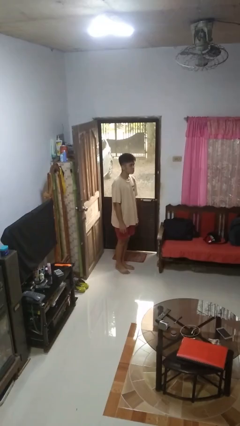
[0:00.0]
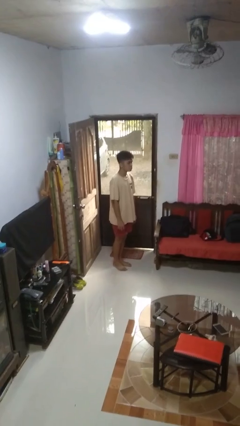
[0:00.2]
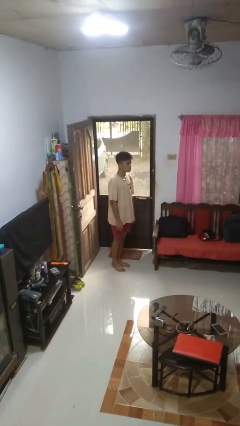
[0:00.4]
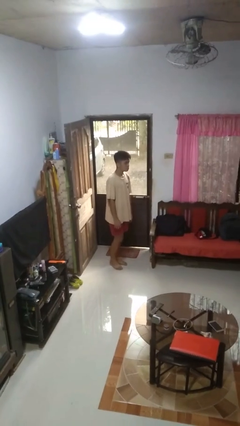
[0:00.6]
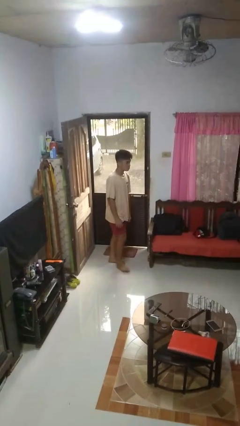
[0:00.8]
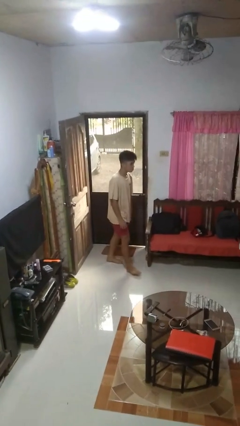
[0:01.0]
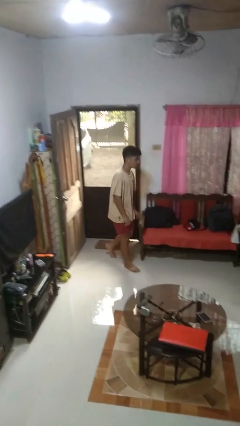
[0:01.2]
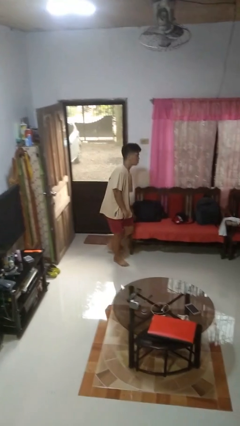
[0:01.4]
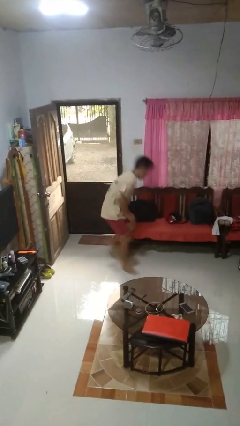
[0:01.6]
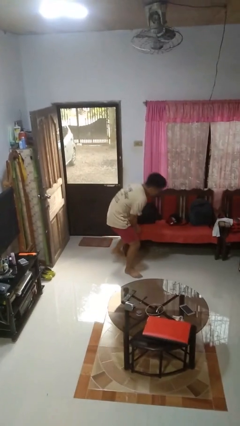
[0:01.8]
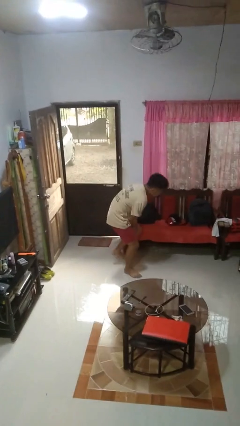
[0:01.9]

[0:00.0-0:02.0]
person trips on object on floor

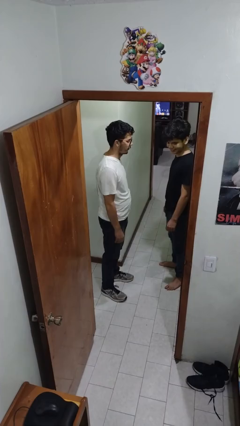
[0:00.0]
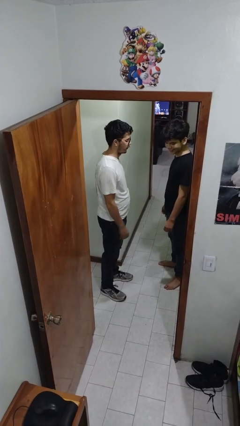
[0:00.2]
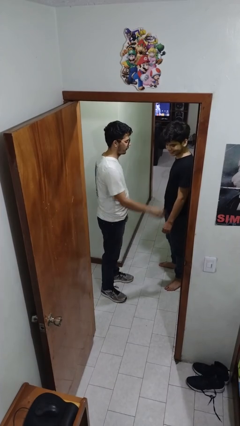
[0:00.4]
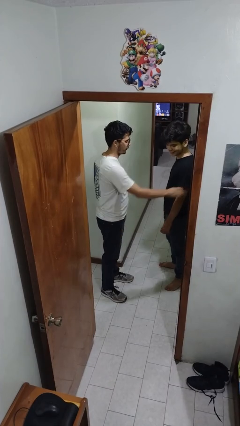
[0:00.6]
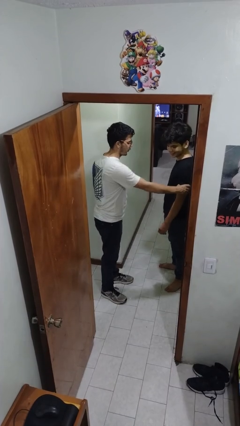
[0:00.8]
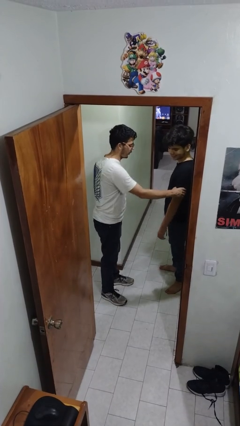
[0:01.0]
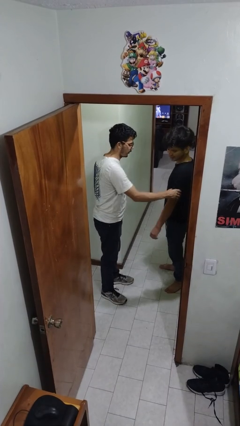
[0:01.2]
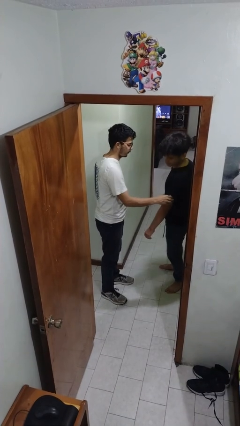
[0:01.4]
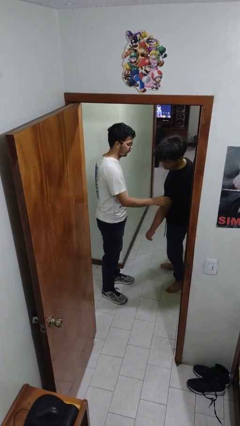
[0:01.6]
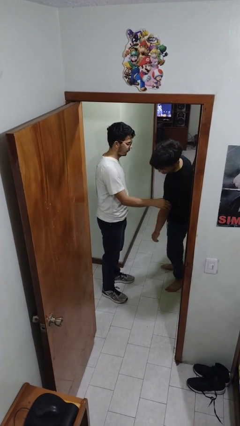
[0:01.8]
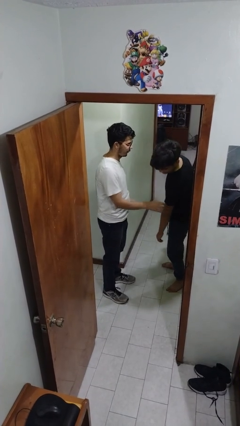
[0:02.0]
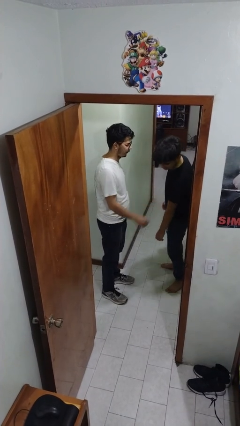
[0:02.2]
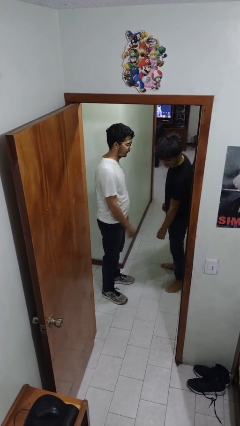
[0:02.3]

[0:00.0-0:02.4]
person grabs person by bicep

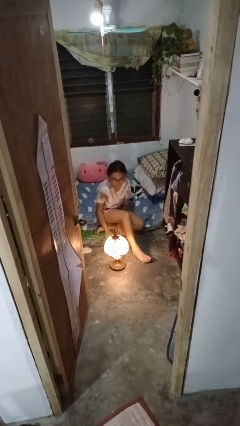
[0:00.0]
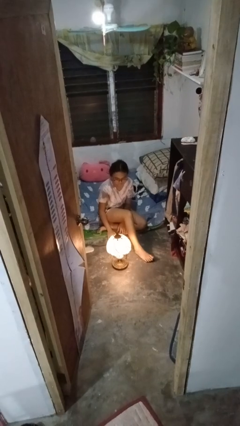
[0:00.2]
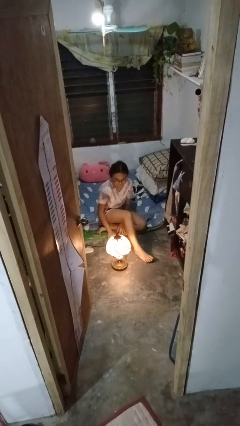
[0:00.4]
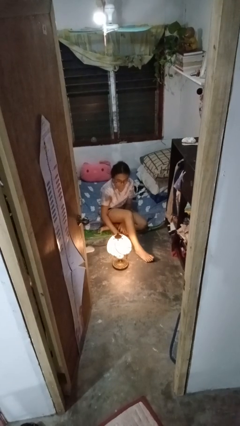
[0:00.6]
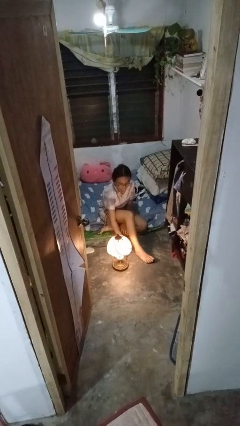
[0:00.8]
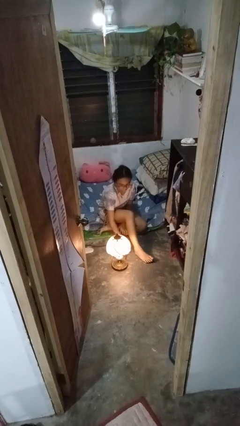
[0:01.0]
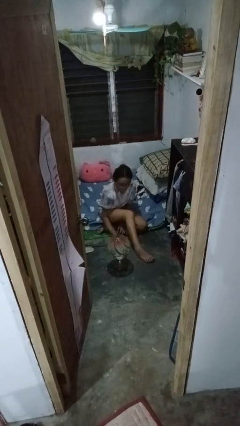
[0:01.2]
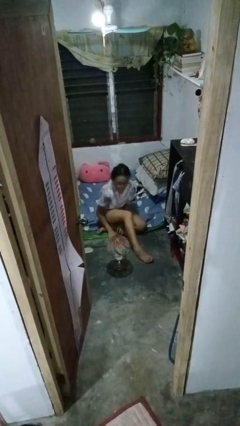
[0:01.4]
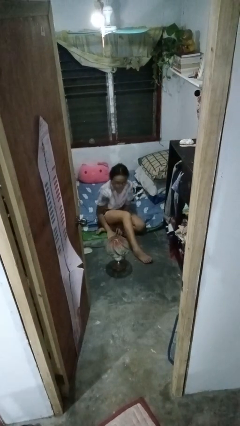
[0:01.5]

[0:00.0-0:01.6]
person turns off lamp

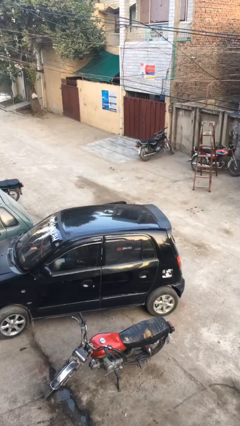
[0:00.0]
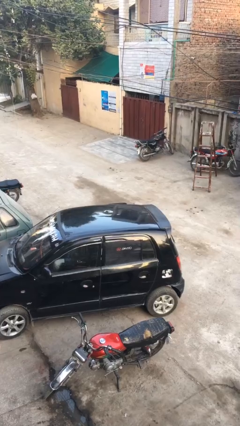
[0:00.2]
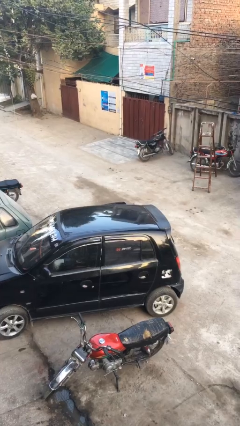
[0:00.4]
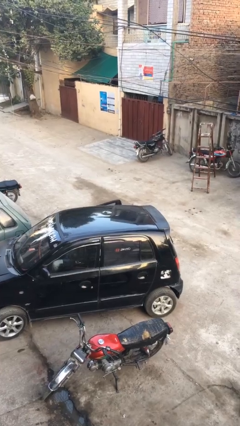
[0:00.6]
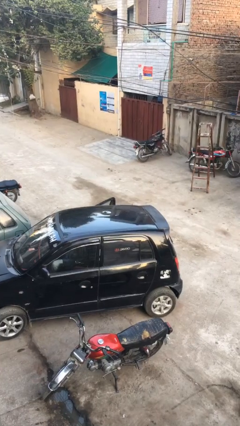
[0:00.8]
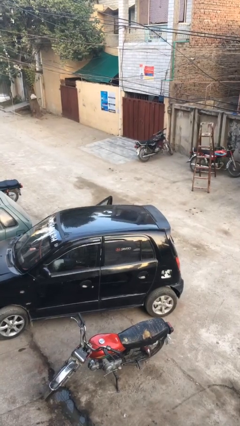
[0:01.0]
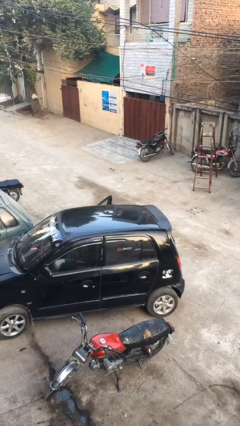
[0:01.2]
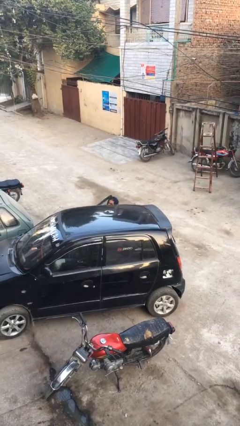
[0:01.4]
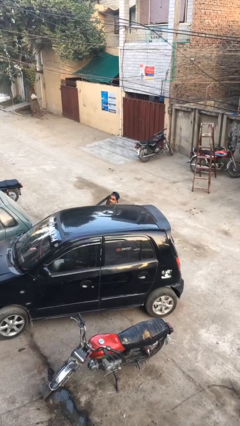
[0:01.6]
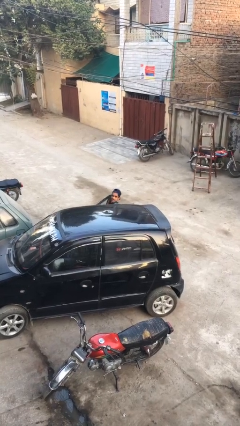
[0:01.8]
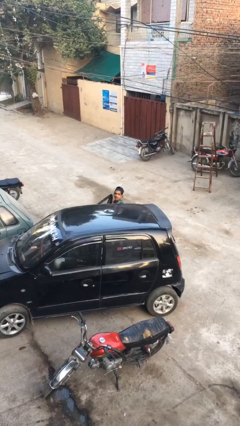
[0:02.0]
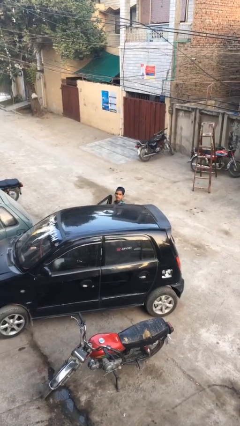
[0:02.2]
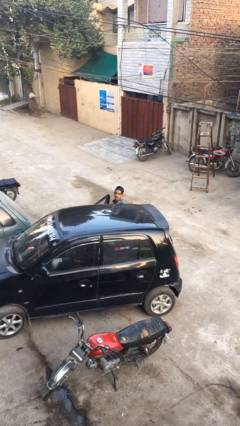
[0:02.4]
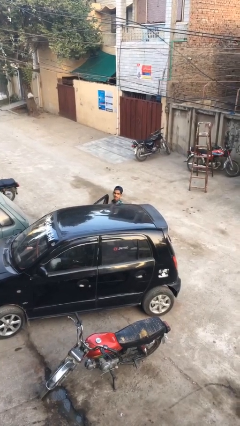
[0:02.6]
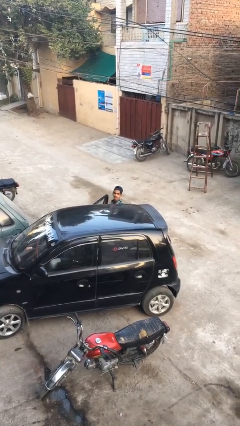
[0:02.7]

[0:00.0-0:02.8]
car drops off person

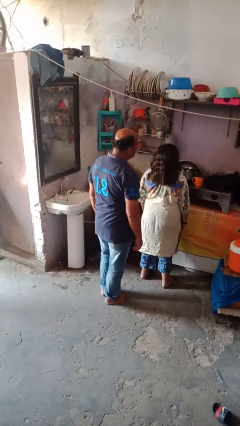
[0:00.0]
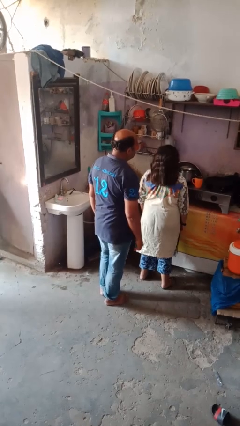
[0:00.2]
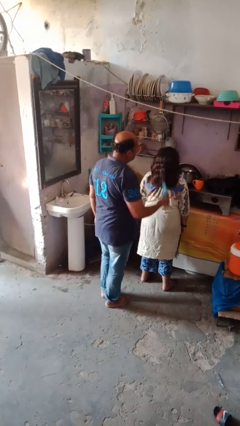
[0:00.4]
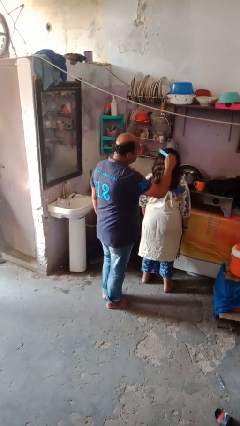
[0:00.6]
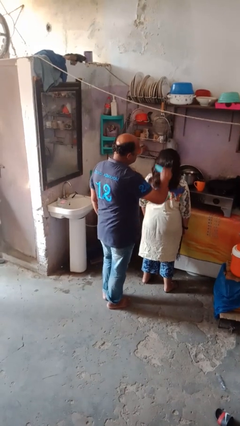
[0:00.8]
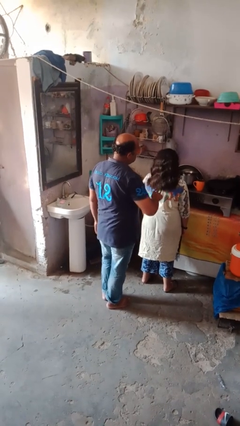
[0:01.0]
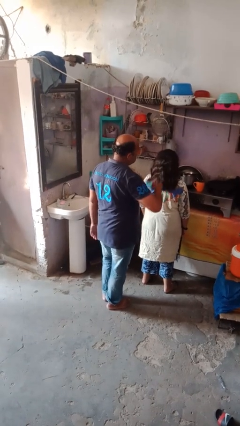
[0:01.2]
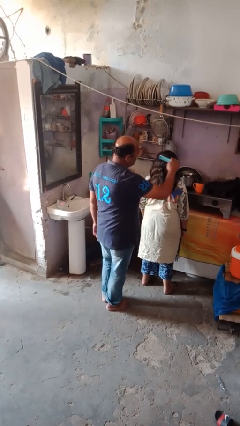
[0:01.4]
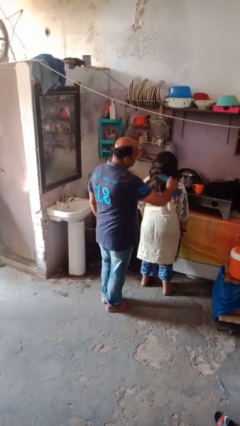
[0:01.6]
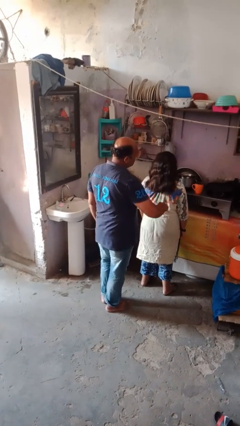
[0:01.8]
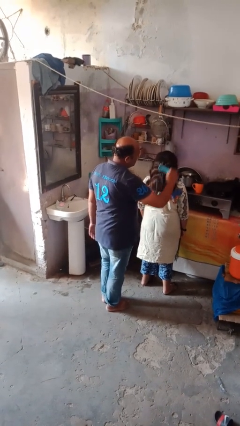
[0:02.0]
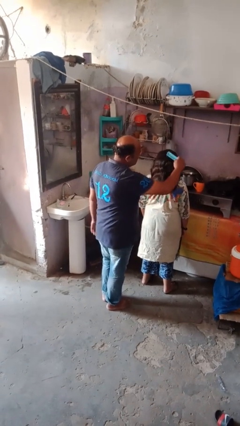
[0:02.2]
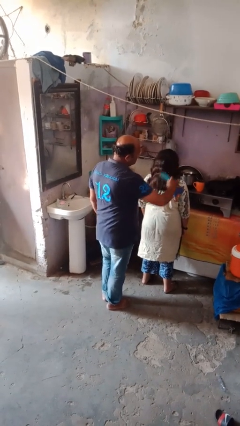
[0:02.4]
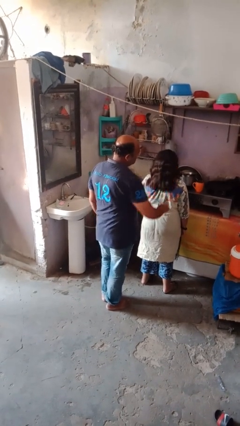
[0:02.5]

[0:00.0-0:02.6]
person brushes hair of person

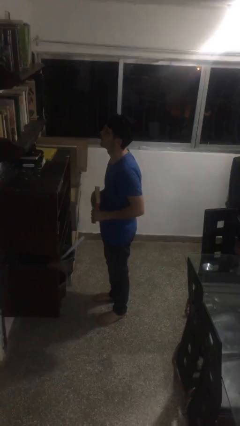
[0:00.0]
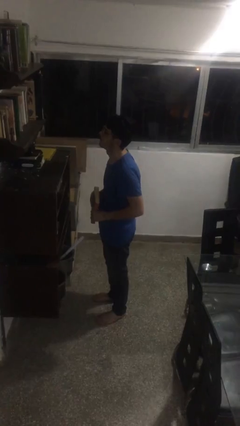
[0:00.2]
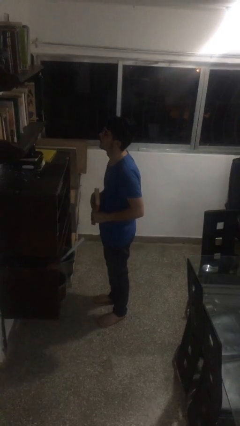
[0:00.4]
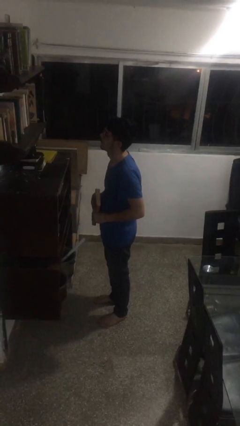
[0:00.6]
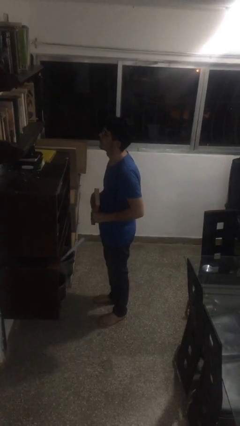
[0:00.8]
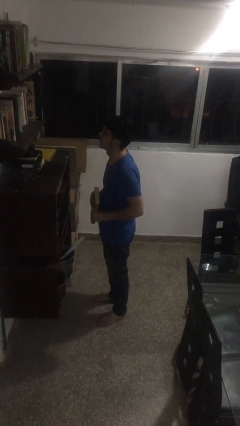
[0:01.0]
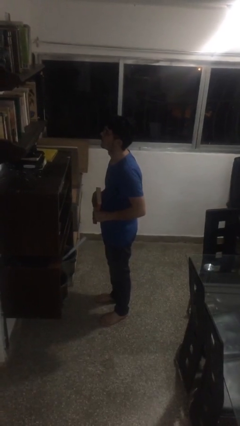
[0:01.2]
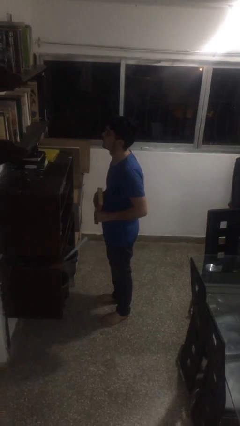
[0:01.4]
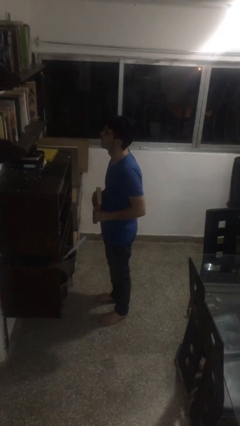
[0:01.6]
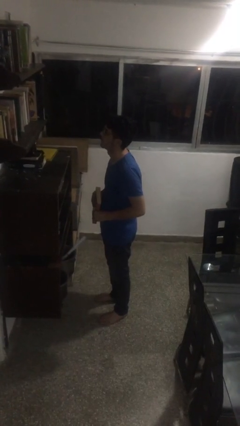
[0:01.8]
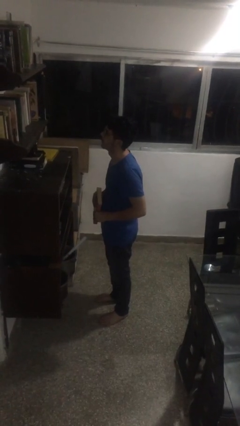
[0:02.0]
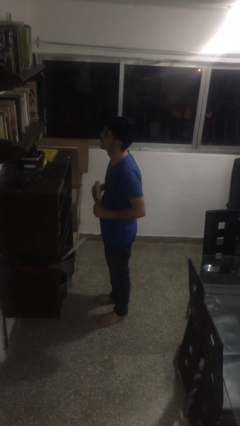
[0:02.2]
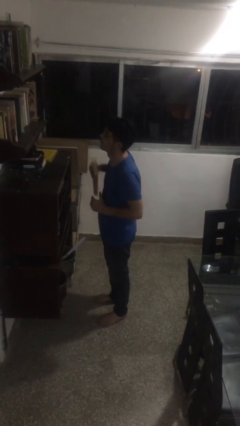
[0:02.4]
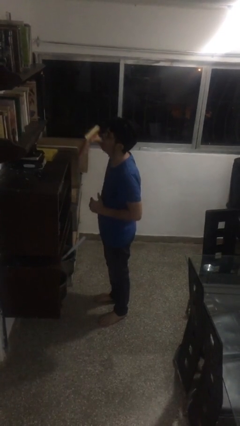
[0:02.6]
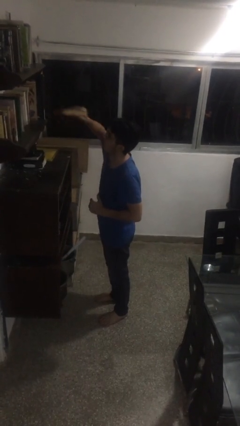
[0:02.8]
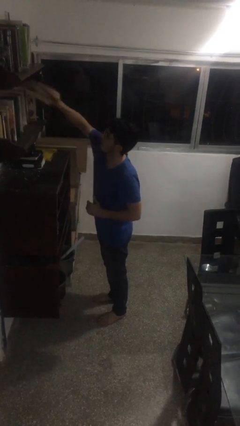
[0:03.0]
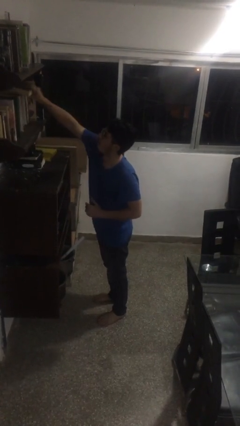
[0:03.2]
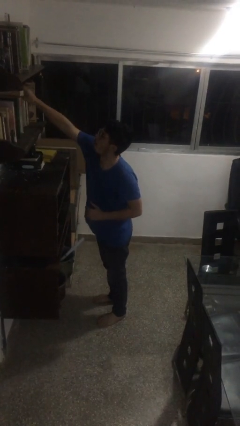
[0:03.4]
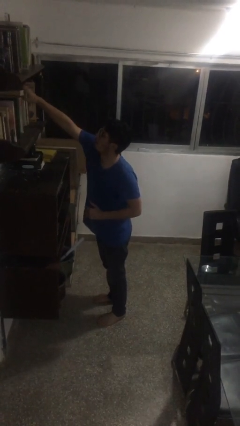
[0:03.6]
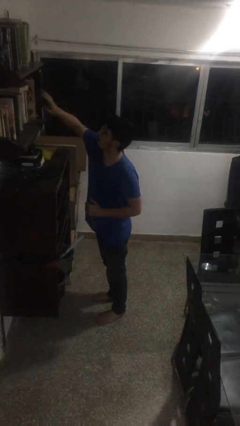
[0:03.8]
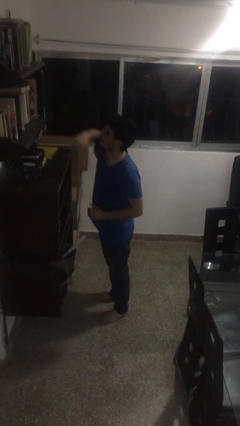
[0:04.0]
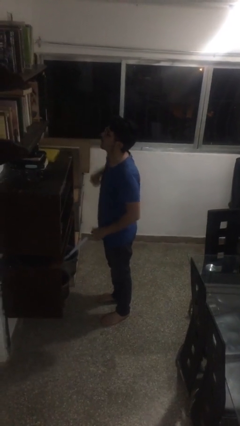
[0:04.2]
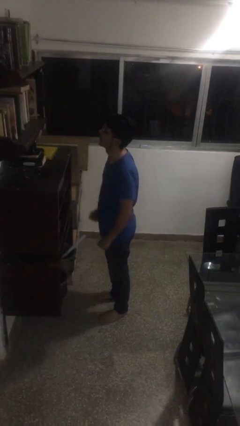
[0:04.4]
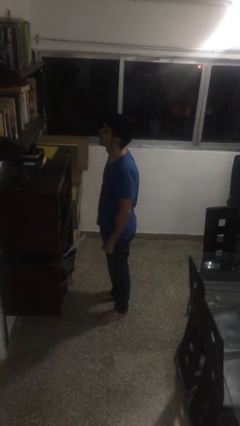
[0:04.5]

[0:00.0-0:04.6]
person puts down object on shelf

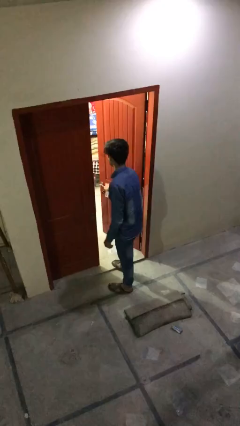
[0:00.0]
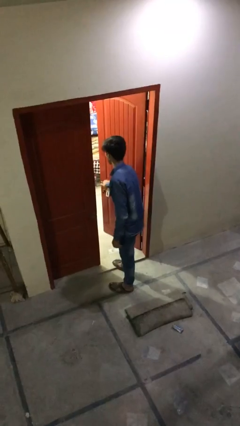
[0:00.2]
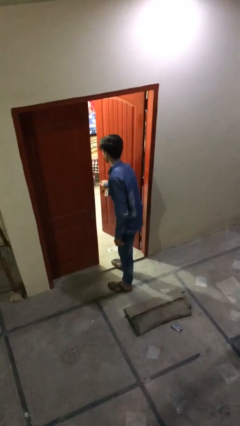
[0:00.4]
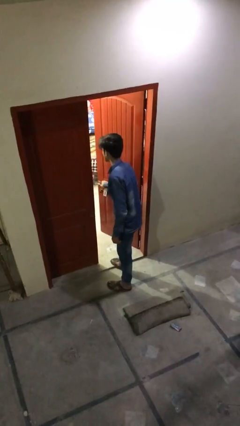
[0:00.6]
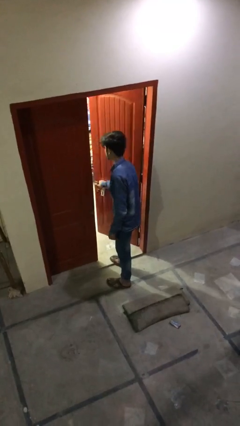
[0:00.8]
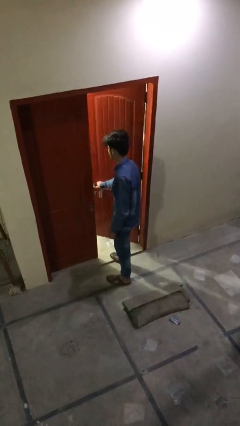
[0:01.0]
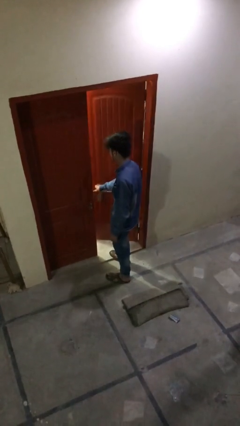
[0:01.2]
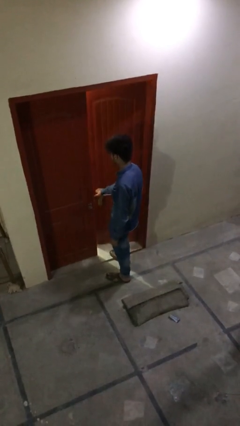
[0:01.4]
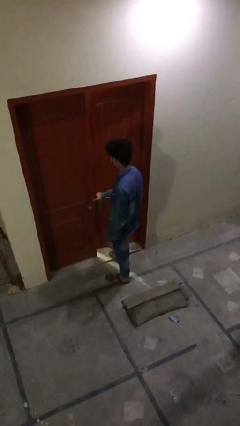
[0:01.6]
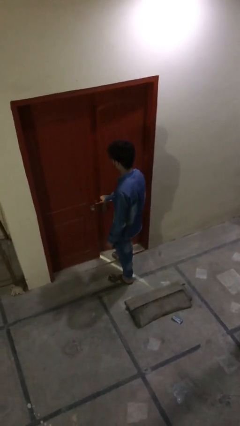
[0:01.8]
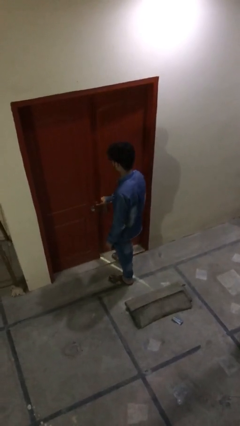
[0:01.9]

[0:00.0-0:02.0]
person closes facility door
